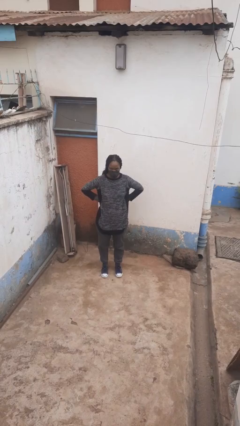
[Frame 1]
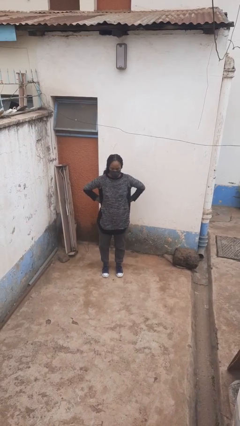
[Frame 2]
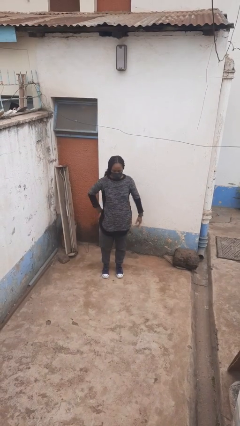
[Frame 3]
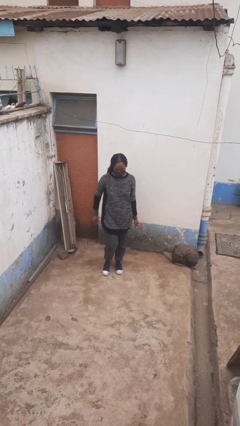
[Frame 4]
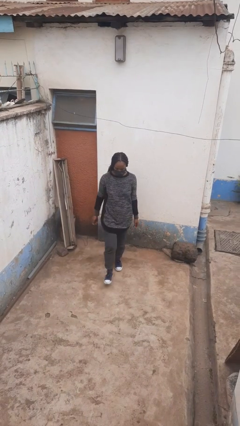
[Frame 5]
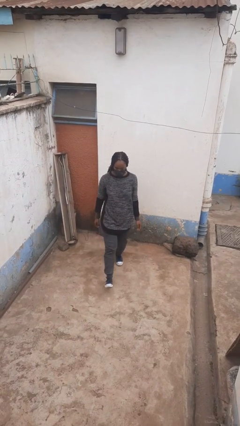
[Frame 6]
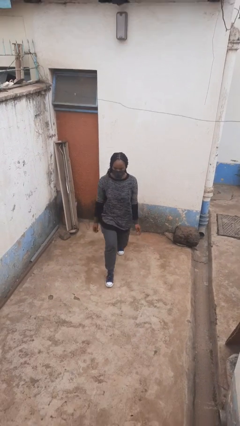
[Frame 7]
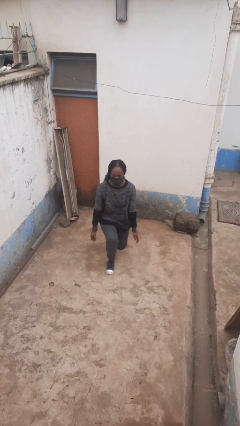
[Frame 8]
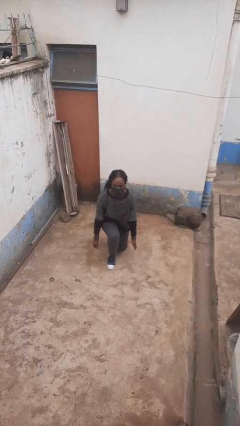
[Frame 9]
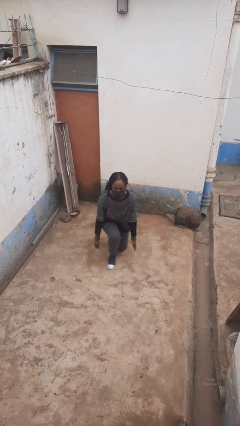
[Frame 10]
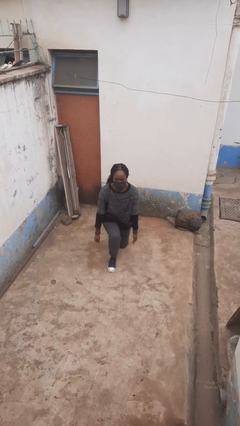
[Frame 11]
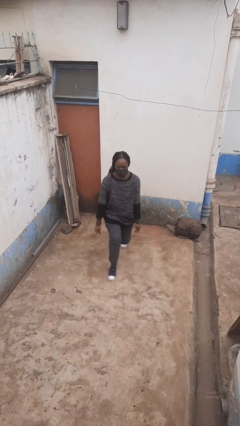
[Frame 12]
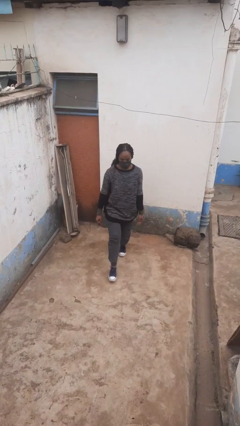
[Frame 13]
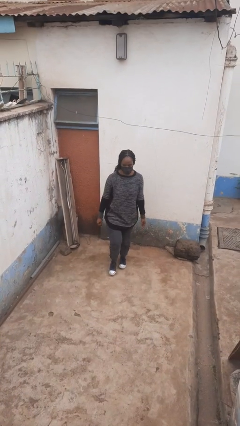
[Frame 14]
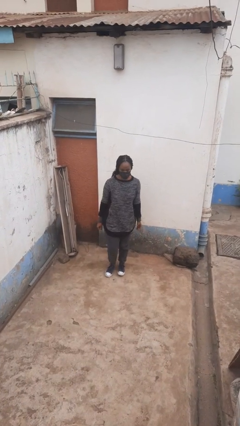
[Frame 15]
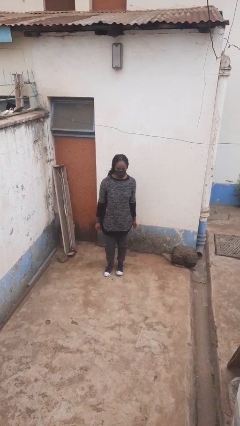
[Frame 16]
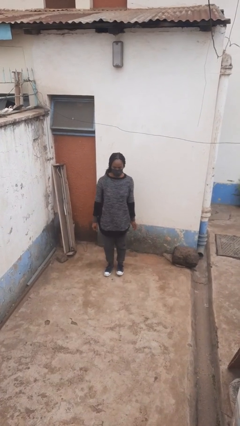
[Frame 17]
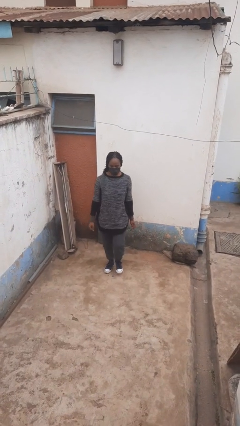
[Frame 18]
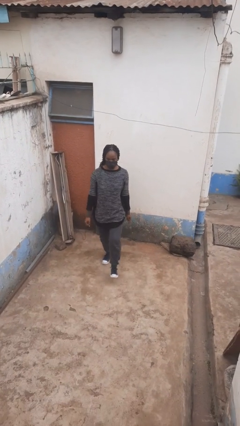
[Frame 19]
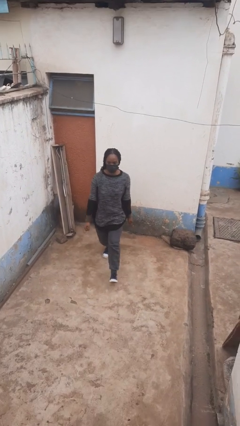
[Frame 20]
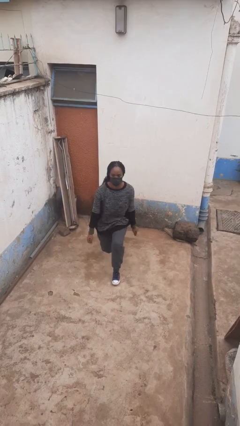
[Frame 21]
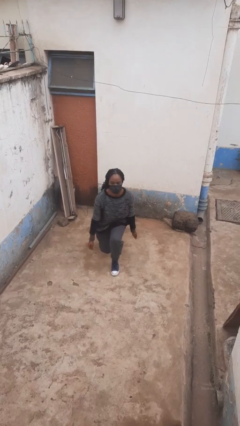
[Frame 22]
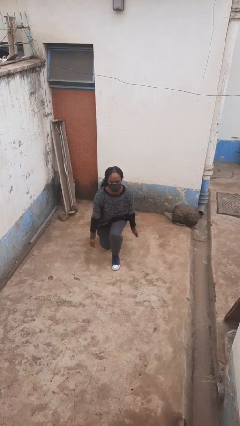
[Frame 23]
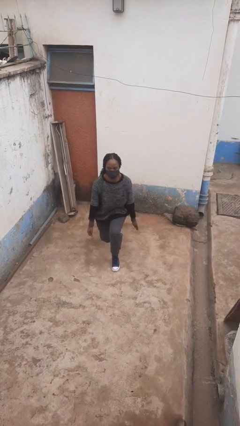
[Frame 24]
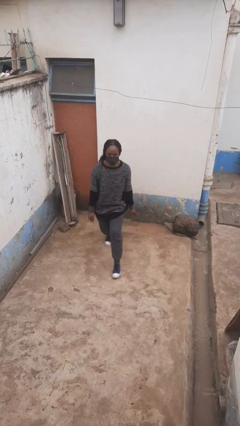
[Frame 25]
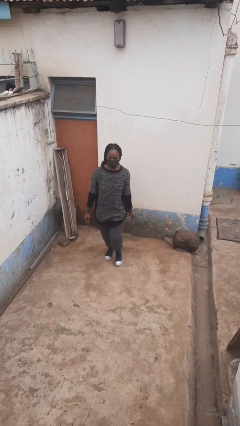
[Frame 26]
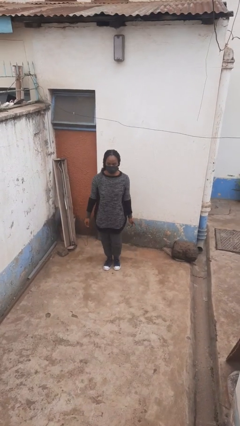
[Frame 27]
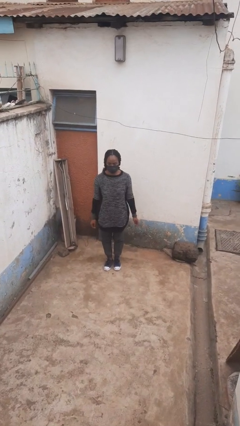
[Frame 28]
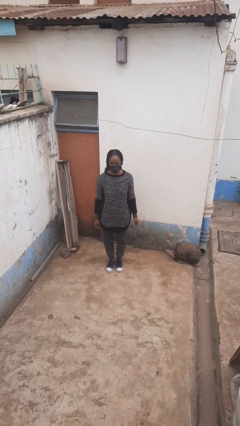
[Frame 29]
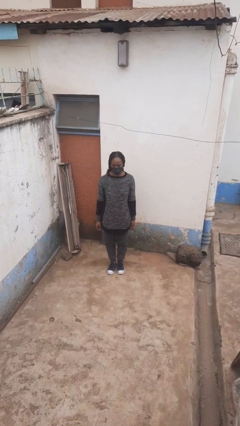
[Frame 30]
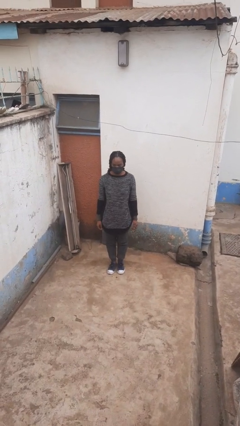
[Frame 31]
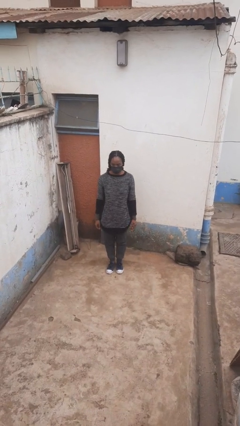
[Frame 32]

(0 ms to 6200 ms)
person exercises with lunges

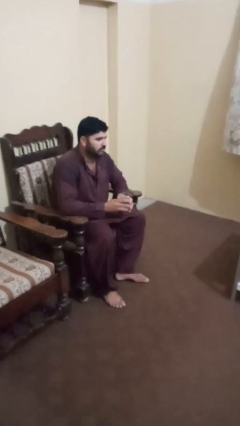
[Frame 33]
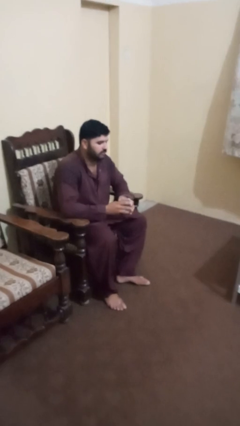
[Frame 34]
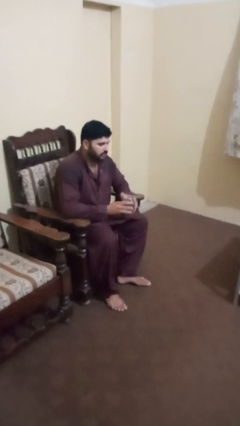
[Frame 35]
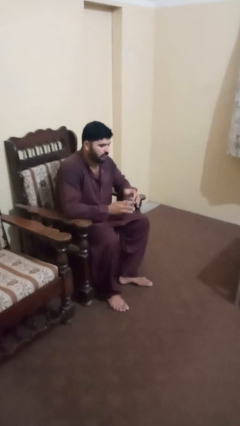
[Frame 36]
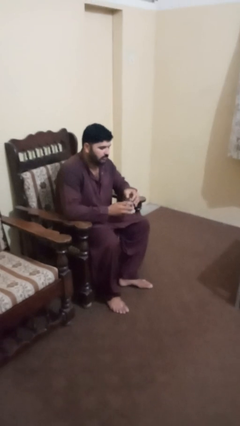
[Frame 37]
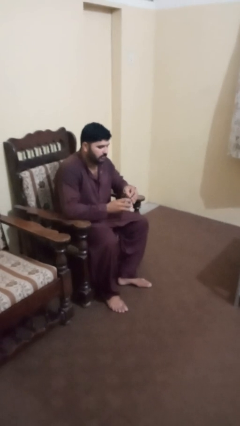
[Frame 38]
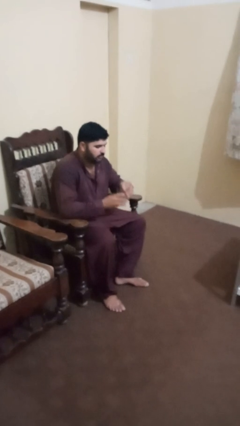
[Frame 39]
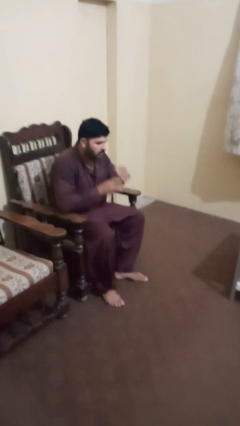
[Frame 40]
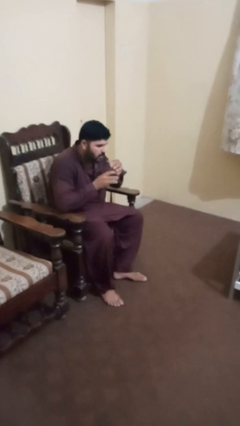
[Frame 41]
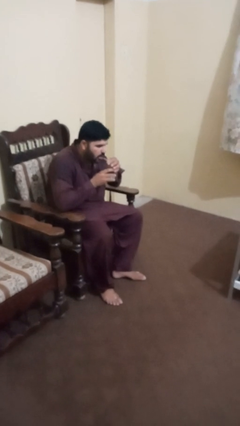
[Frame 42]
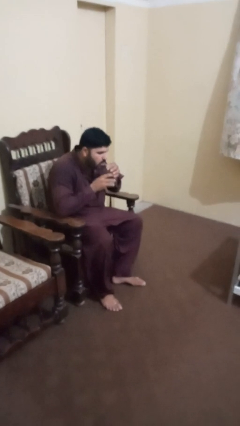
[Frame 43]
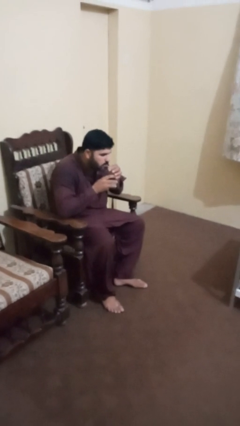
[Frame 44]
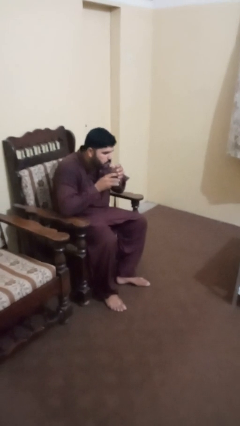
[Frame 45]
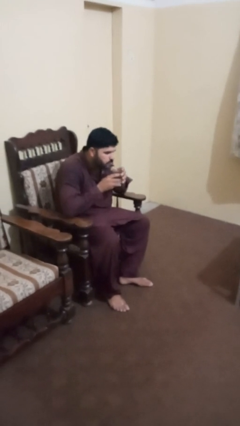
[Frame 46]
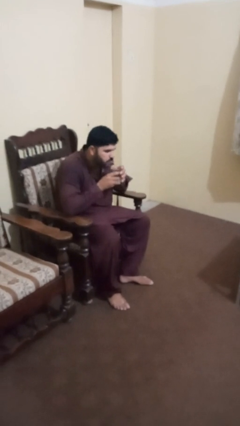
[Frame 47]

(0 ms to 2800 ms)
person drinks from straw

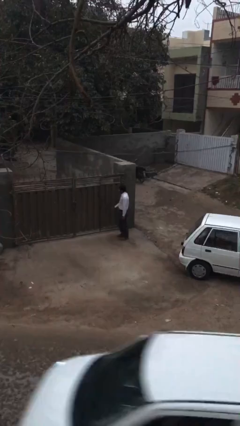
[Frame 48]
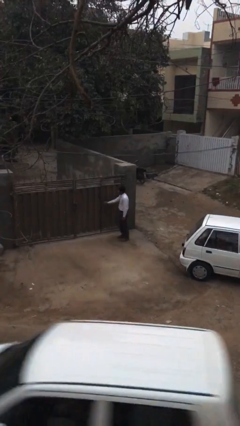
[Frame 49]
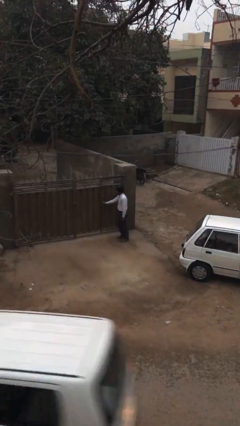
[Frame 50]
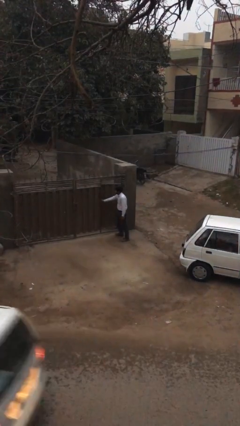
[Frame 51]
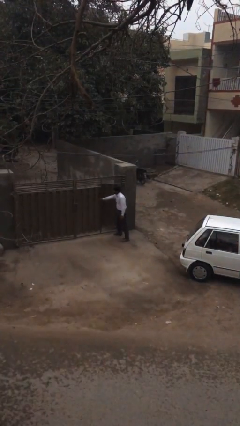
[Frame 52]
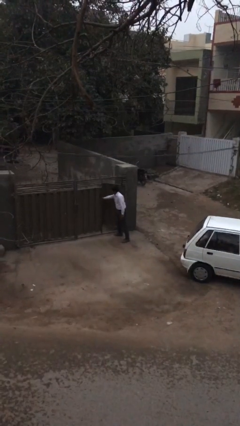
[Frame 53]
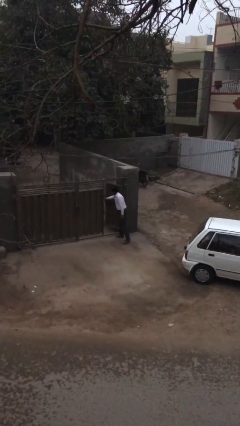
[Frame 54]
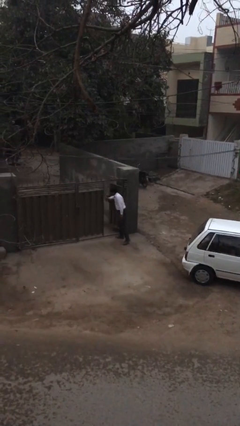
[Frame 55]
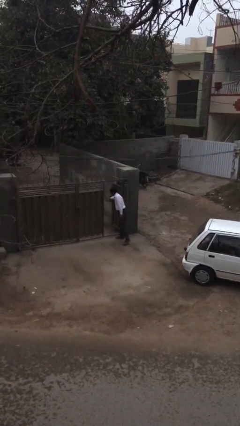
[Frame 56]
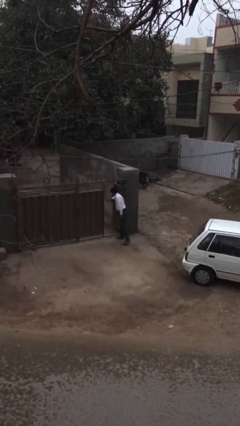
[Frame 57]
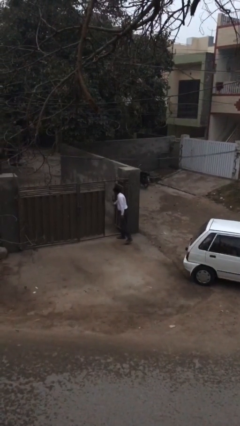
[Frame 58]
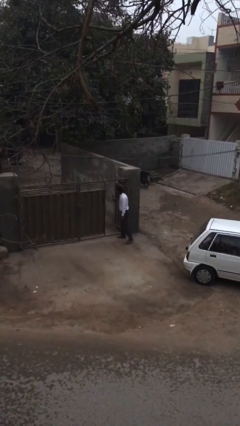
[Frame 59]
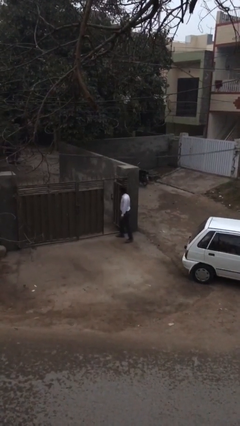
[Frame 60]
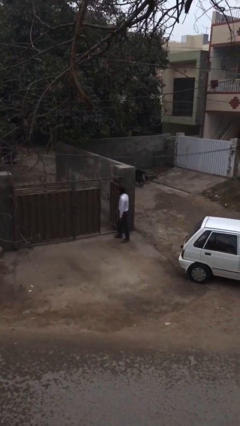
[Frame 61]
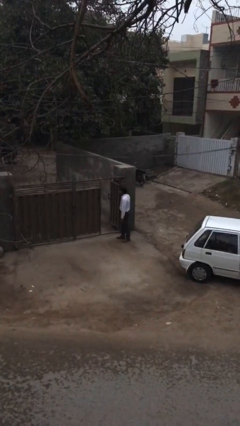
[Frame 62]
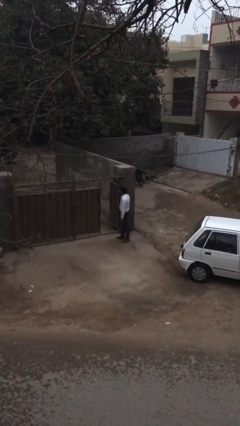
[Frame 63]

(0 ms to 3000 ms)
person opens facility door

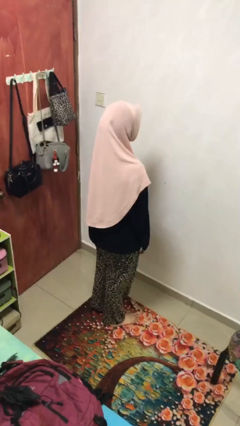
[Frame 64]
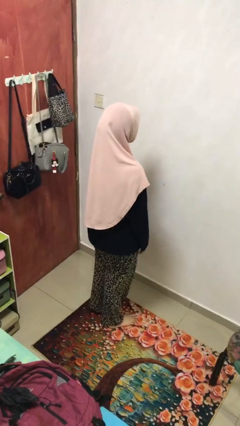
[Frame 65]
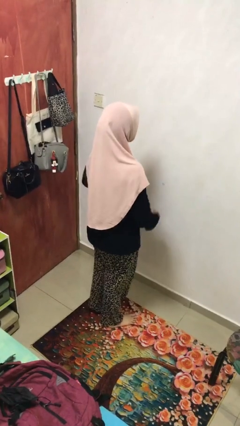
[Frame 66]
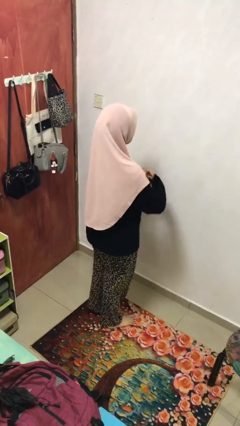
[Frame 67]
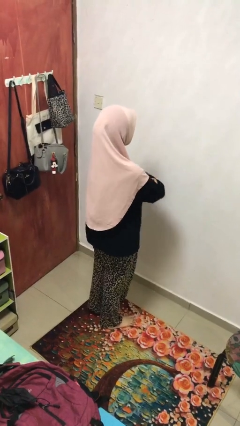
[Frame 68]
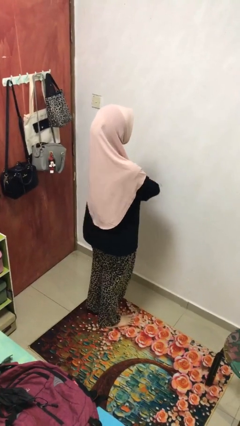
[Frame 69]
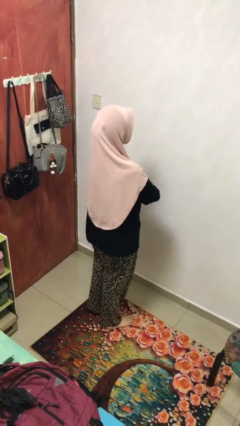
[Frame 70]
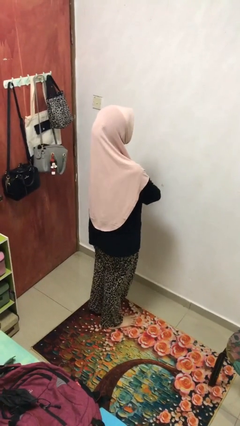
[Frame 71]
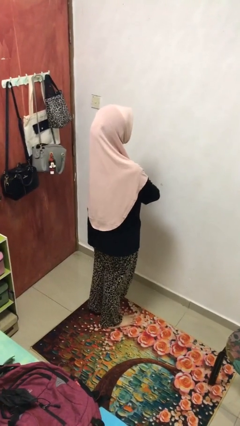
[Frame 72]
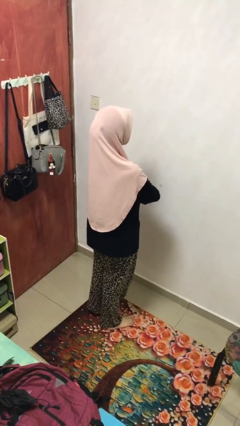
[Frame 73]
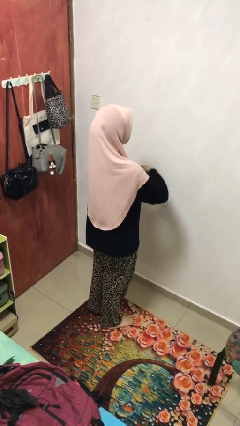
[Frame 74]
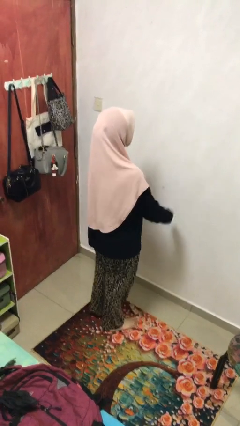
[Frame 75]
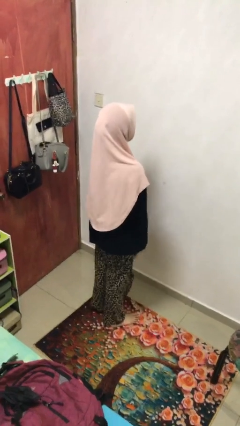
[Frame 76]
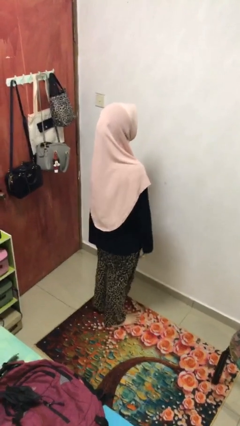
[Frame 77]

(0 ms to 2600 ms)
person crosses arms

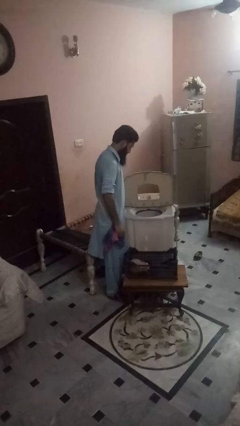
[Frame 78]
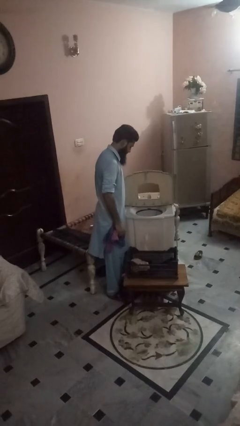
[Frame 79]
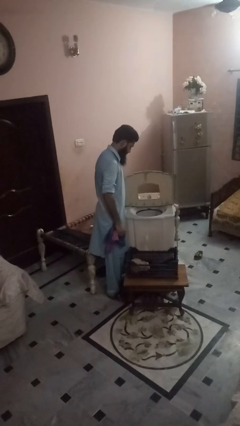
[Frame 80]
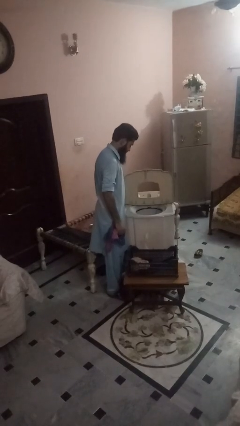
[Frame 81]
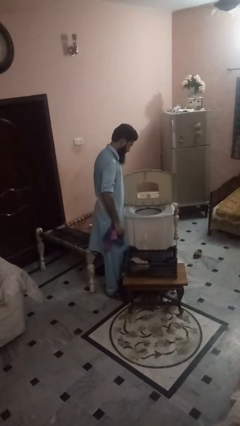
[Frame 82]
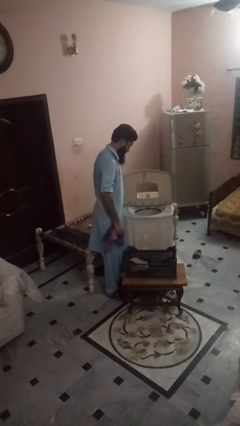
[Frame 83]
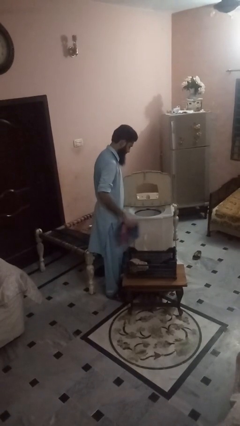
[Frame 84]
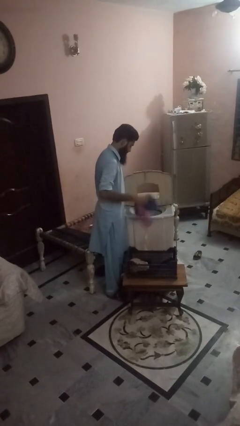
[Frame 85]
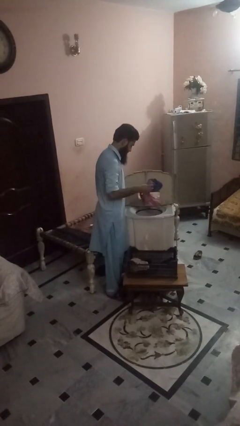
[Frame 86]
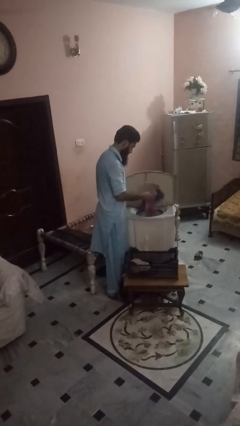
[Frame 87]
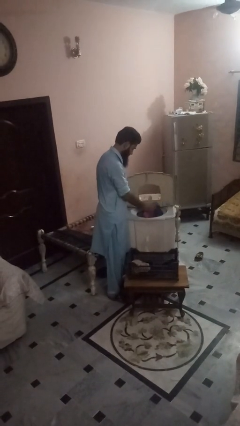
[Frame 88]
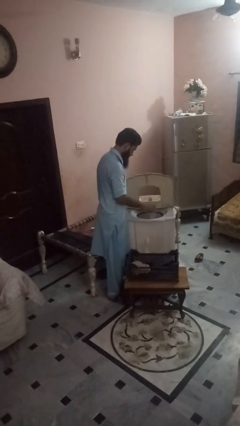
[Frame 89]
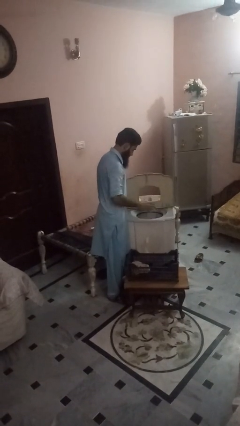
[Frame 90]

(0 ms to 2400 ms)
person loads dishwasher

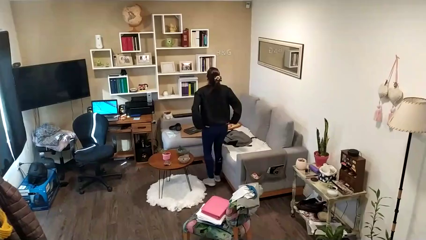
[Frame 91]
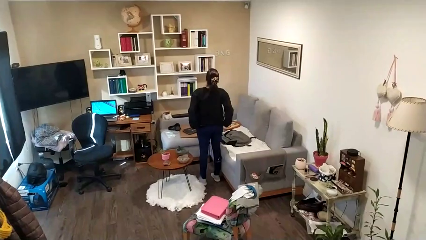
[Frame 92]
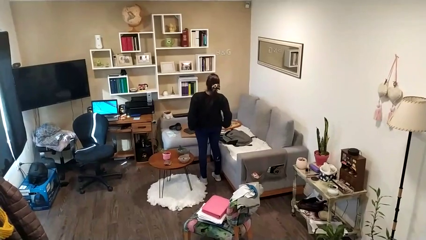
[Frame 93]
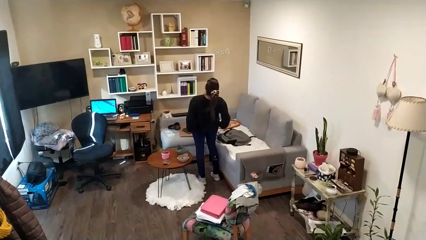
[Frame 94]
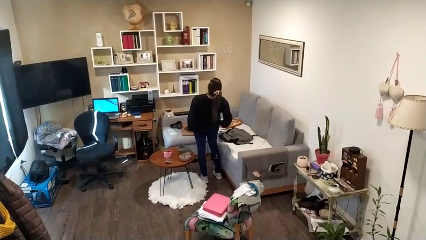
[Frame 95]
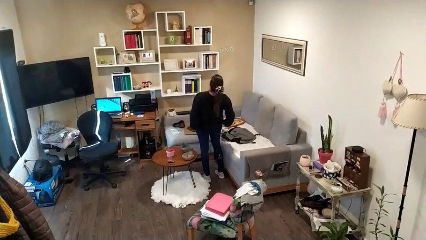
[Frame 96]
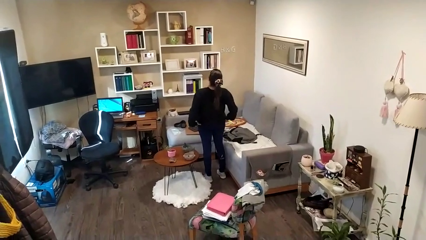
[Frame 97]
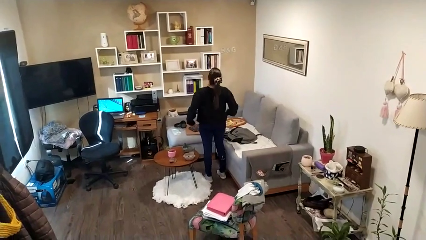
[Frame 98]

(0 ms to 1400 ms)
person stretches back
